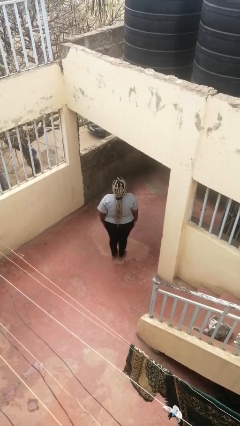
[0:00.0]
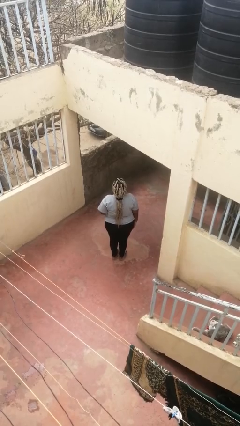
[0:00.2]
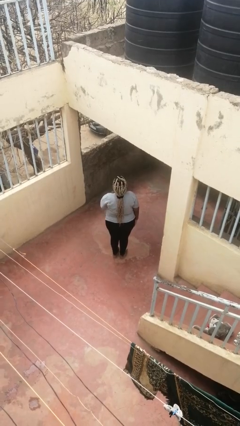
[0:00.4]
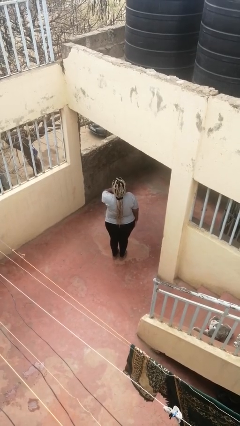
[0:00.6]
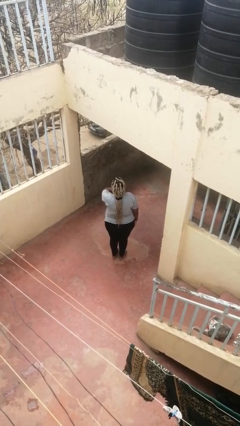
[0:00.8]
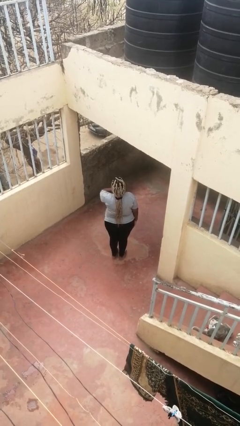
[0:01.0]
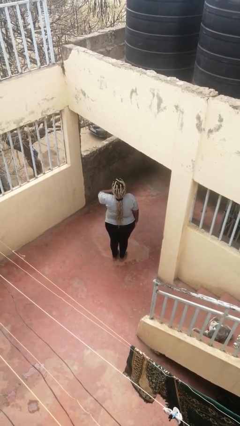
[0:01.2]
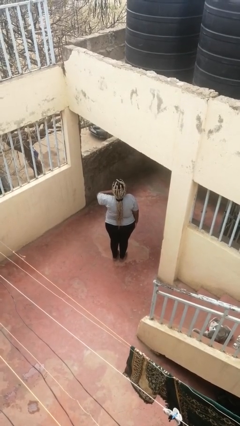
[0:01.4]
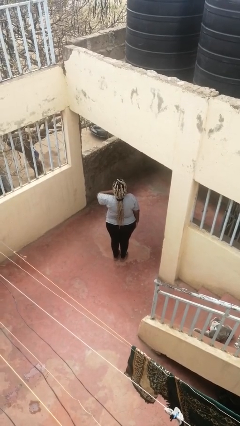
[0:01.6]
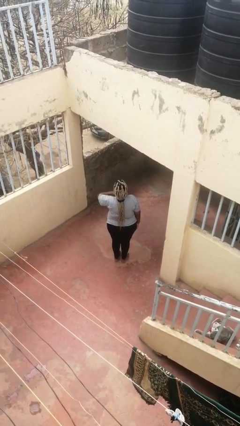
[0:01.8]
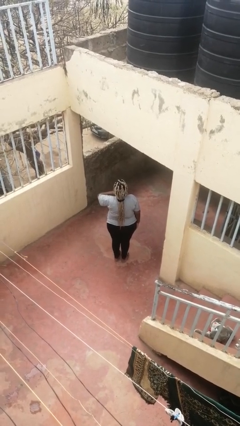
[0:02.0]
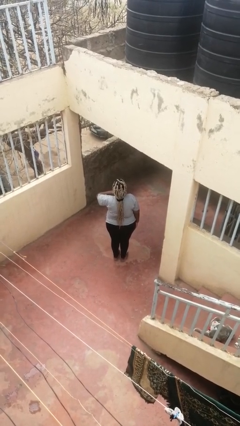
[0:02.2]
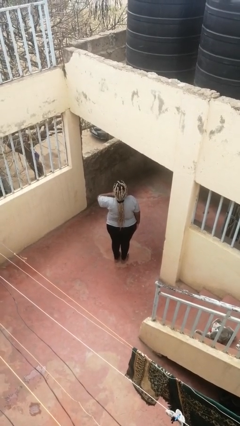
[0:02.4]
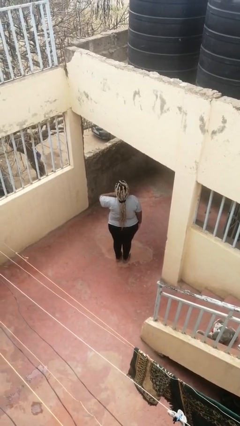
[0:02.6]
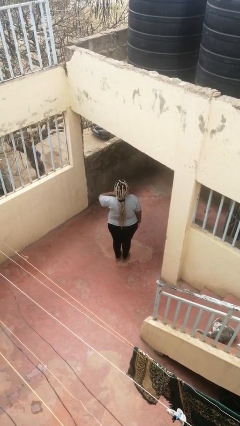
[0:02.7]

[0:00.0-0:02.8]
person gestures cut

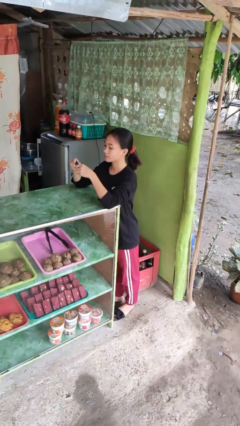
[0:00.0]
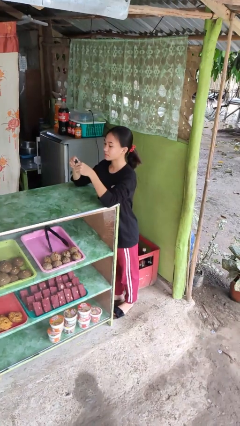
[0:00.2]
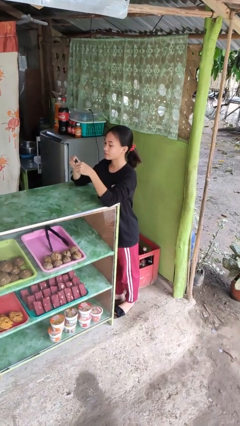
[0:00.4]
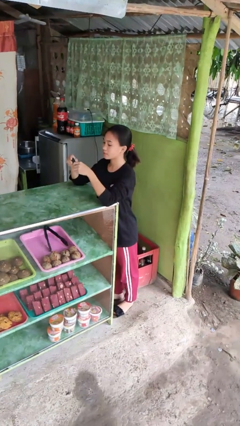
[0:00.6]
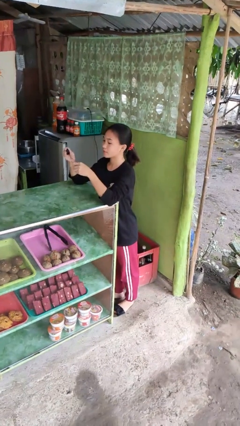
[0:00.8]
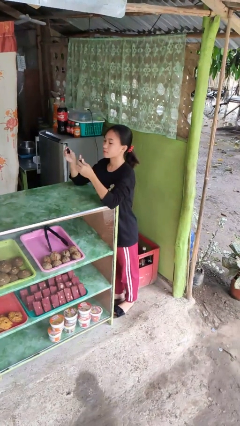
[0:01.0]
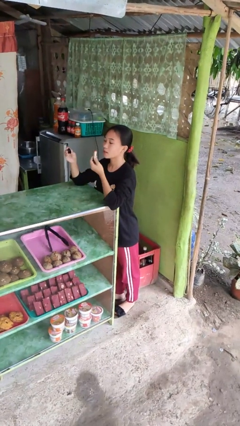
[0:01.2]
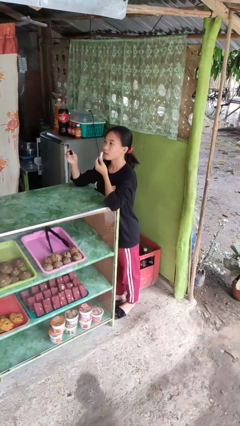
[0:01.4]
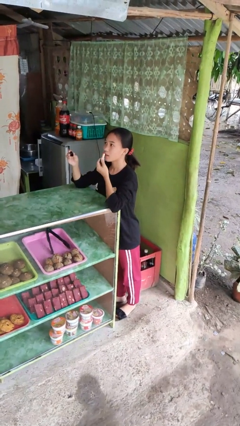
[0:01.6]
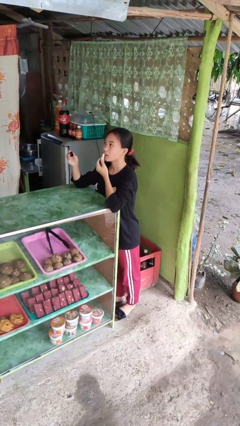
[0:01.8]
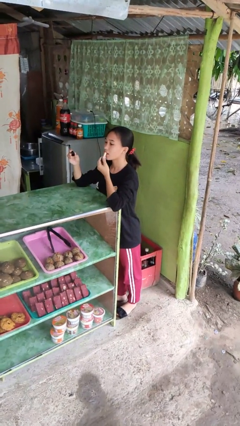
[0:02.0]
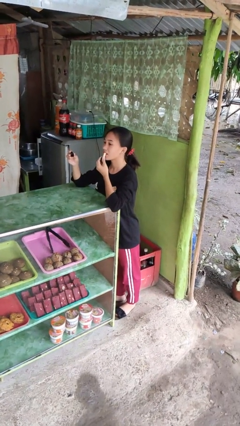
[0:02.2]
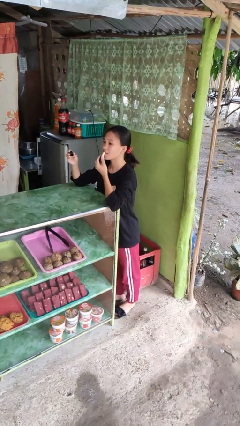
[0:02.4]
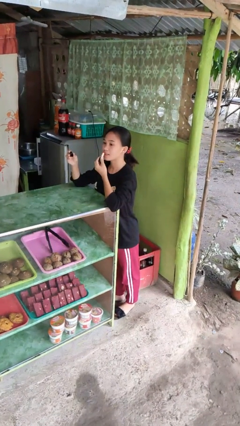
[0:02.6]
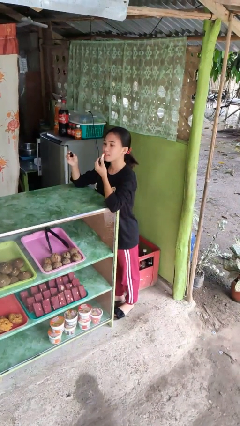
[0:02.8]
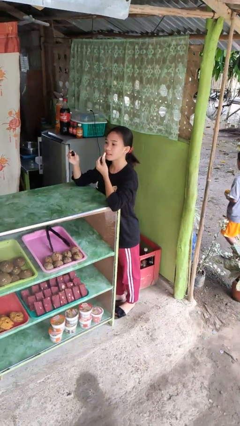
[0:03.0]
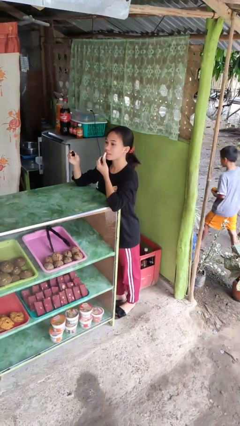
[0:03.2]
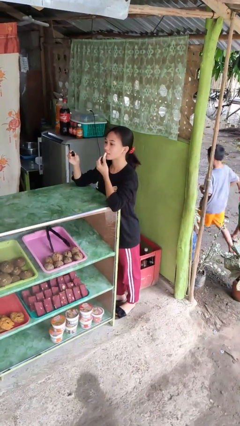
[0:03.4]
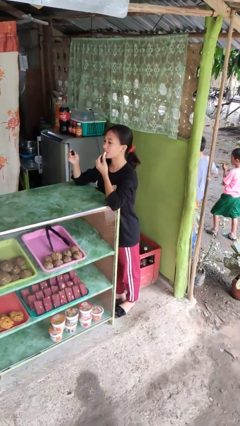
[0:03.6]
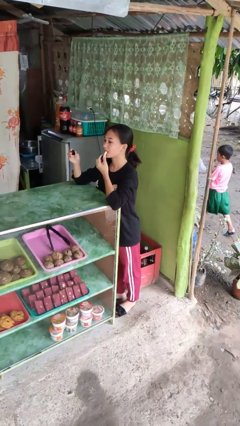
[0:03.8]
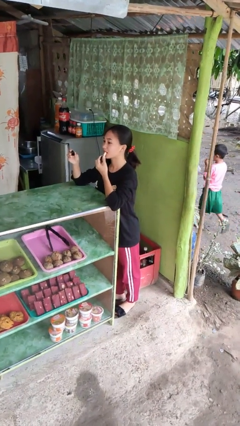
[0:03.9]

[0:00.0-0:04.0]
person applies lip makeup

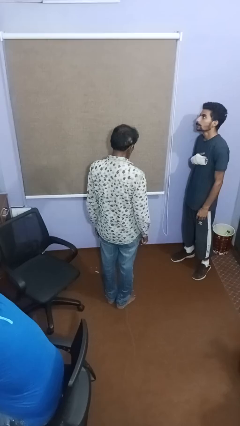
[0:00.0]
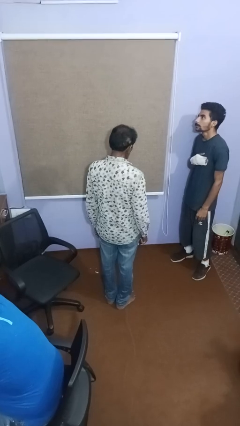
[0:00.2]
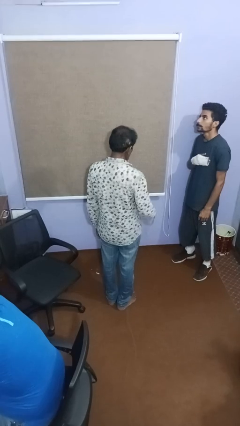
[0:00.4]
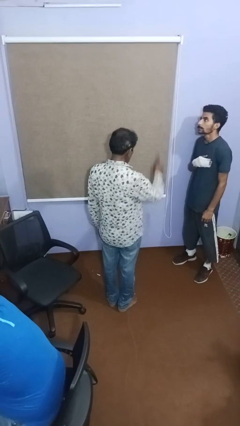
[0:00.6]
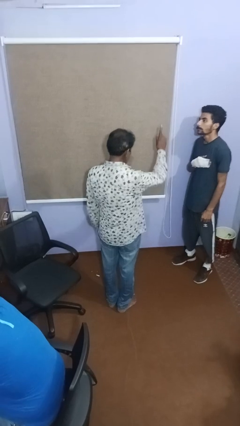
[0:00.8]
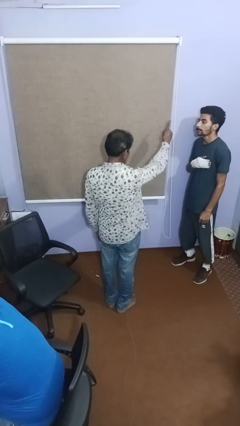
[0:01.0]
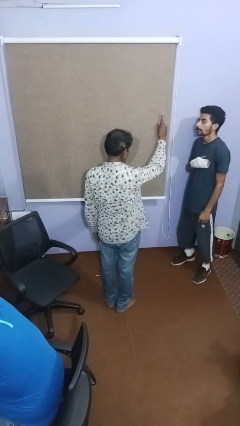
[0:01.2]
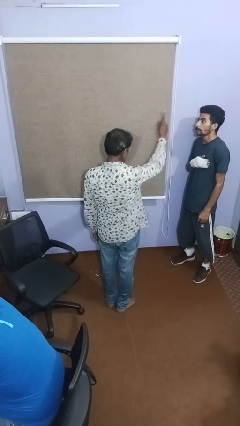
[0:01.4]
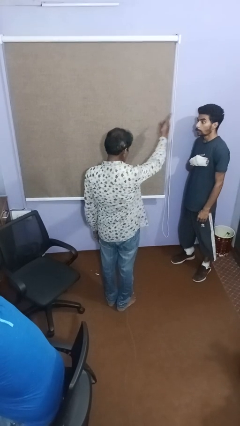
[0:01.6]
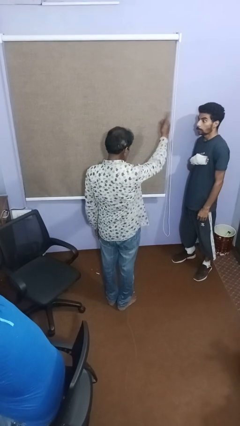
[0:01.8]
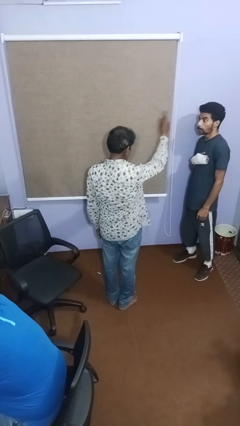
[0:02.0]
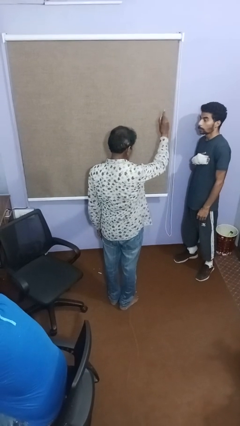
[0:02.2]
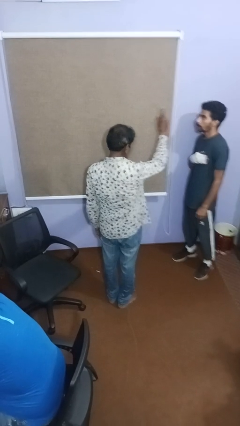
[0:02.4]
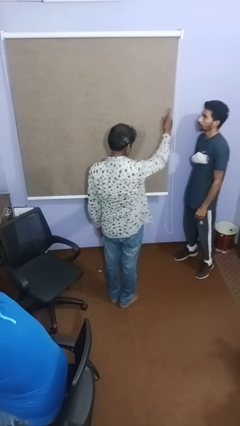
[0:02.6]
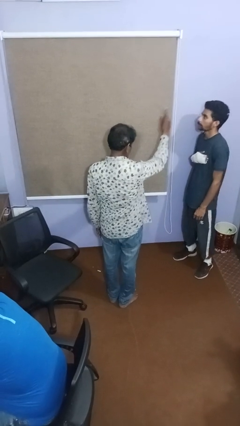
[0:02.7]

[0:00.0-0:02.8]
person points at person

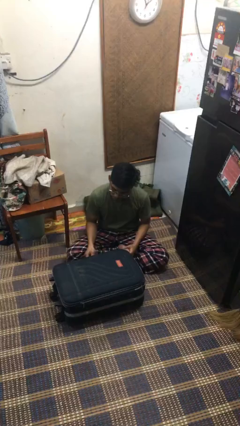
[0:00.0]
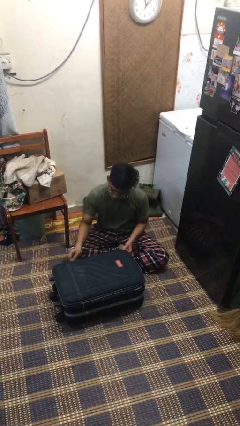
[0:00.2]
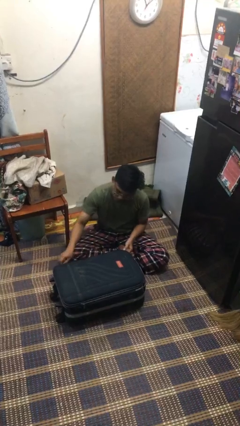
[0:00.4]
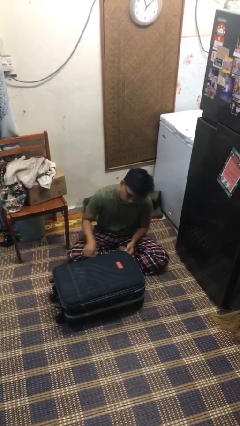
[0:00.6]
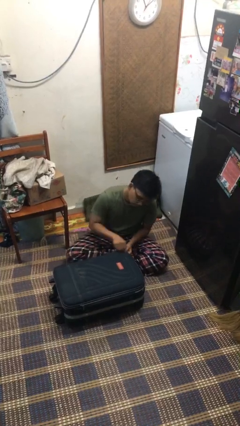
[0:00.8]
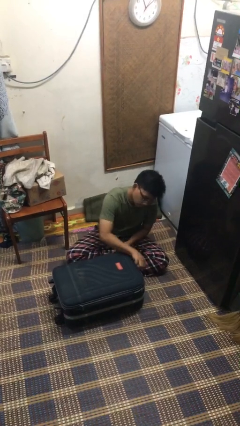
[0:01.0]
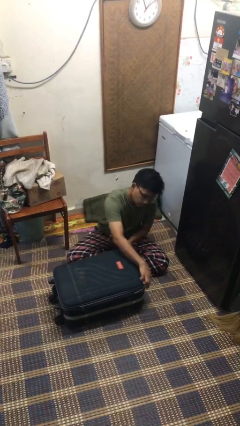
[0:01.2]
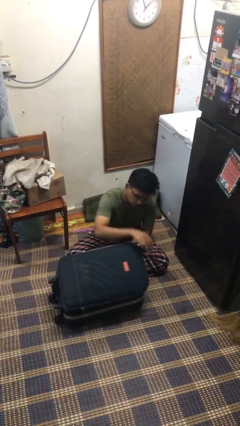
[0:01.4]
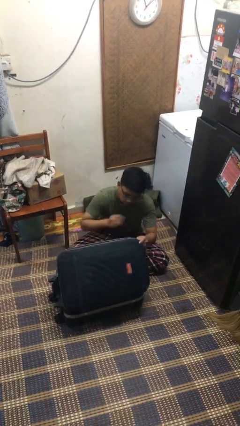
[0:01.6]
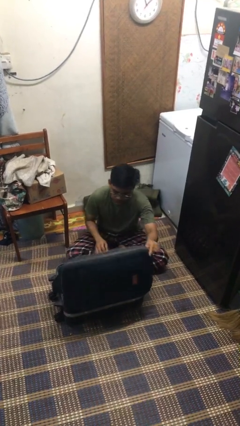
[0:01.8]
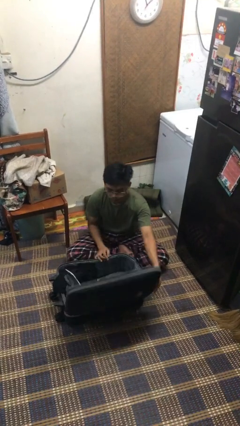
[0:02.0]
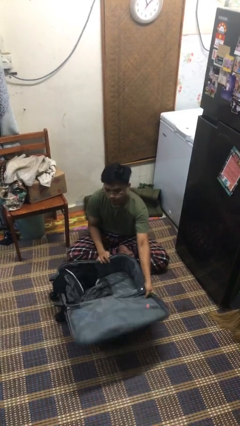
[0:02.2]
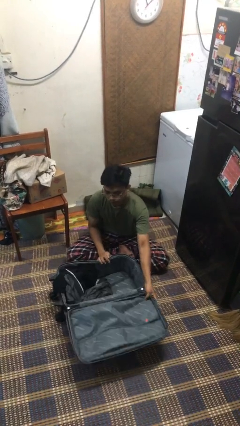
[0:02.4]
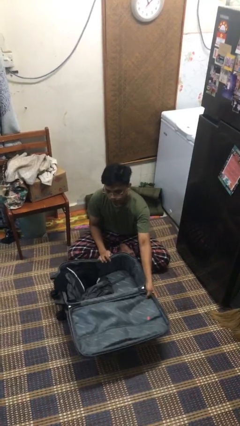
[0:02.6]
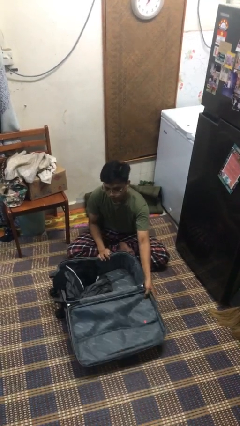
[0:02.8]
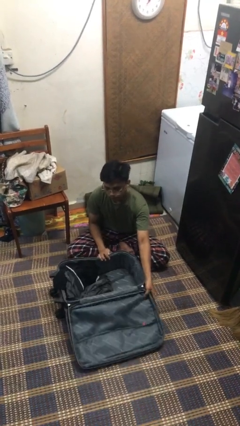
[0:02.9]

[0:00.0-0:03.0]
person opens suitcase

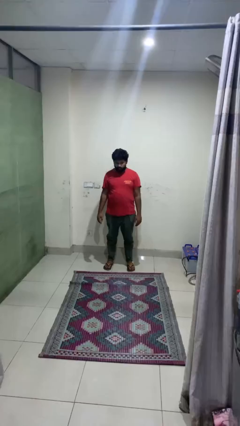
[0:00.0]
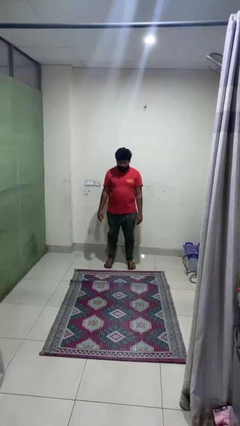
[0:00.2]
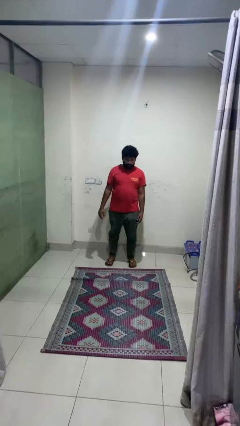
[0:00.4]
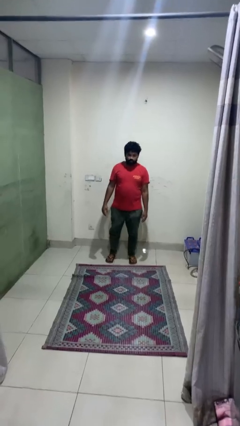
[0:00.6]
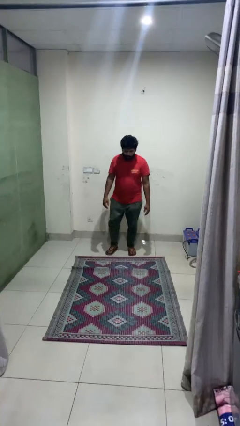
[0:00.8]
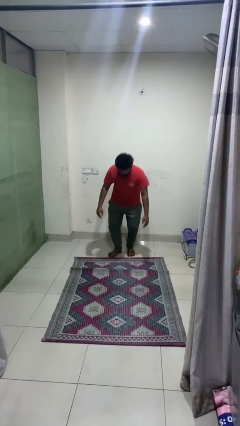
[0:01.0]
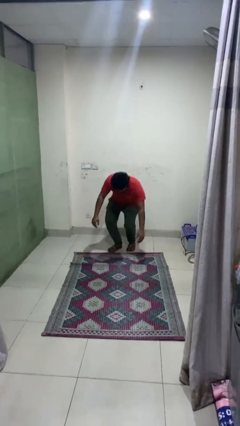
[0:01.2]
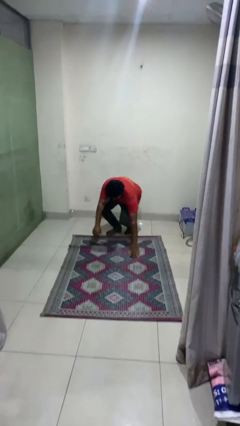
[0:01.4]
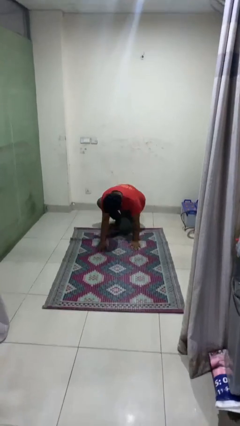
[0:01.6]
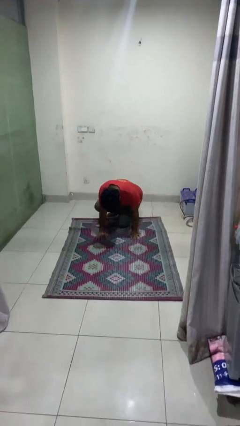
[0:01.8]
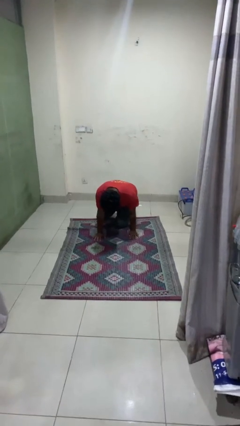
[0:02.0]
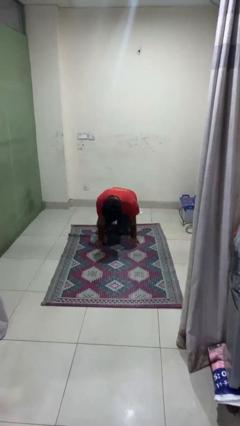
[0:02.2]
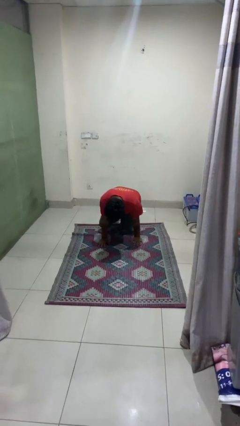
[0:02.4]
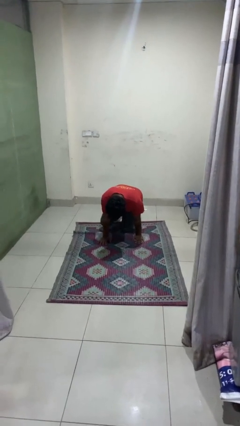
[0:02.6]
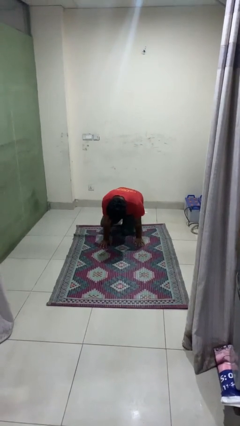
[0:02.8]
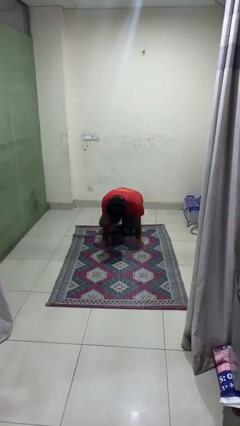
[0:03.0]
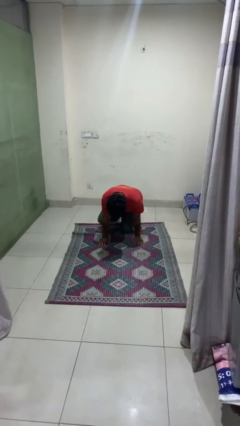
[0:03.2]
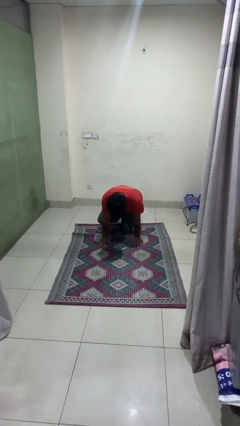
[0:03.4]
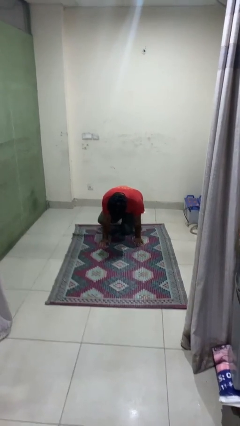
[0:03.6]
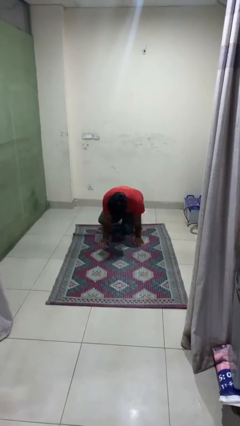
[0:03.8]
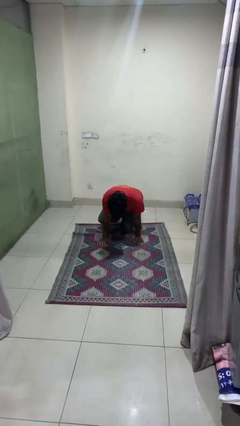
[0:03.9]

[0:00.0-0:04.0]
person falls while standing

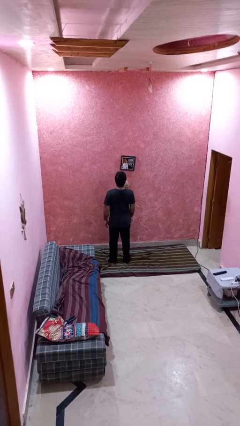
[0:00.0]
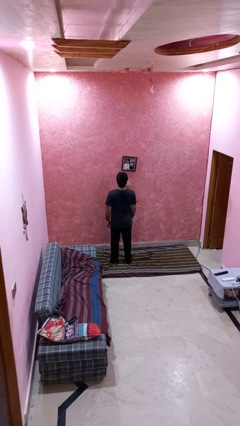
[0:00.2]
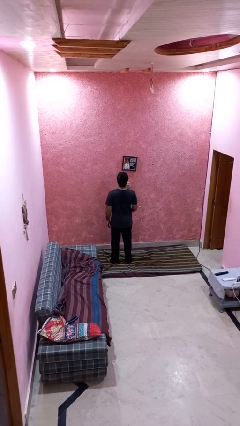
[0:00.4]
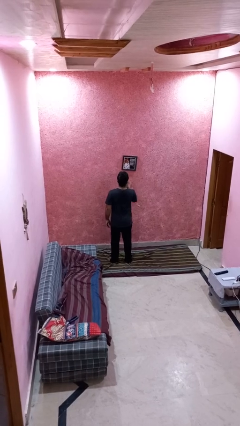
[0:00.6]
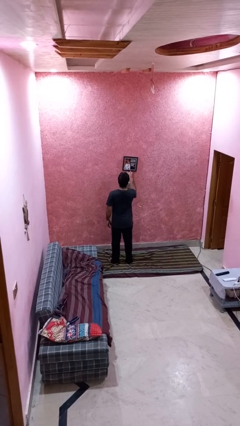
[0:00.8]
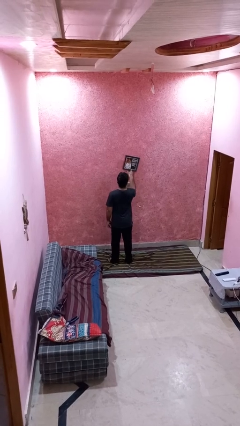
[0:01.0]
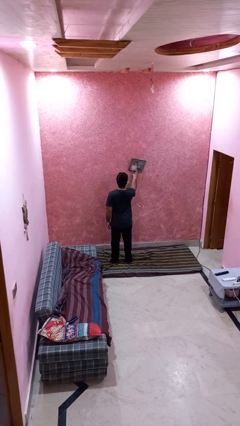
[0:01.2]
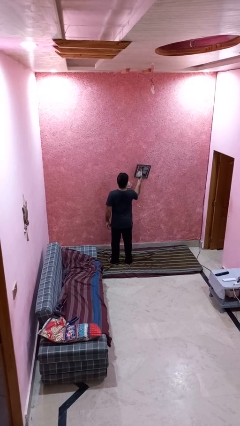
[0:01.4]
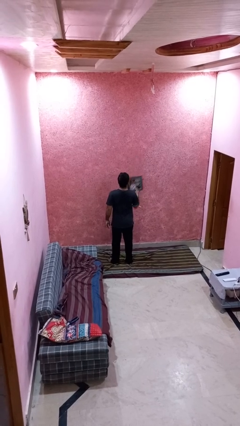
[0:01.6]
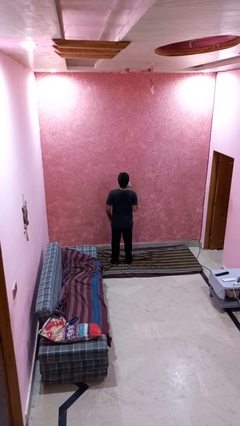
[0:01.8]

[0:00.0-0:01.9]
person takes down picture frame
